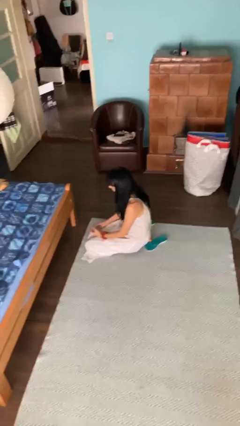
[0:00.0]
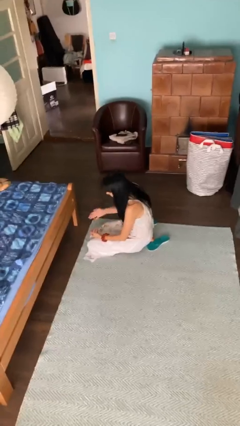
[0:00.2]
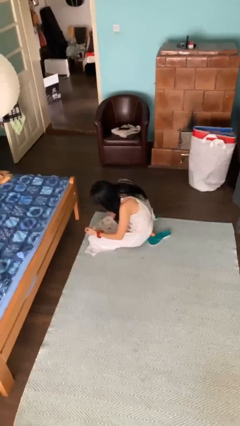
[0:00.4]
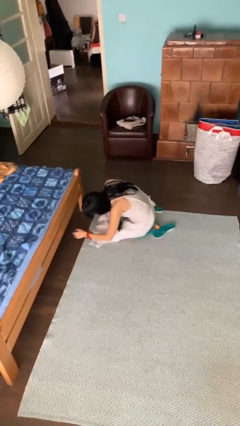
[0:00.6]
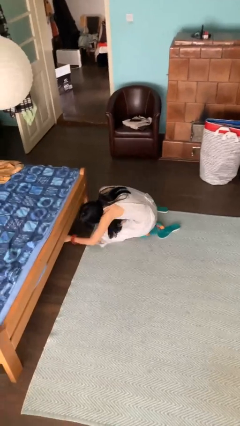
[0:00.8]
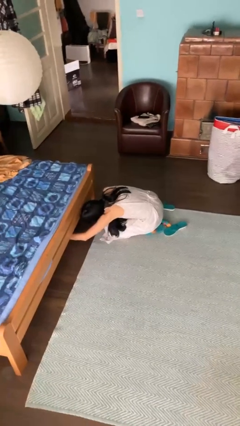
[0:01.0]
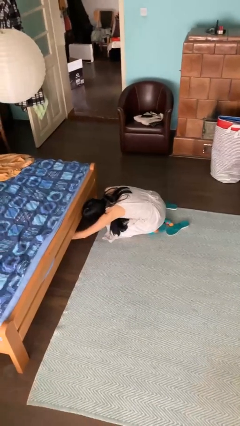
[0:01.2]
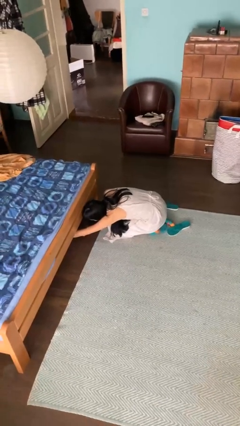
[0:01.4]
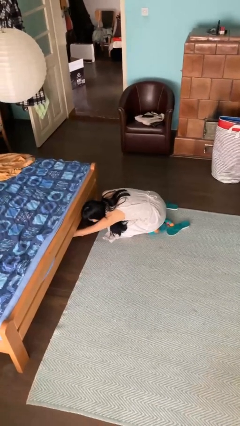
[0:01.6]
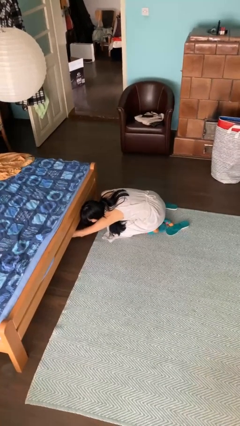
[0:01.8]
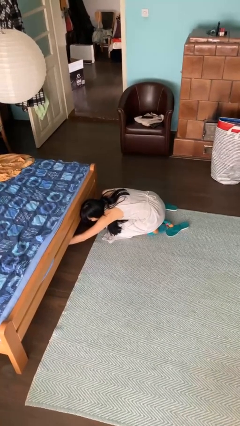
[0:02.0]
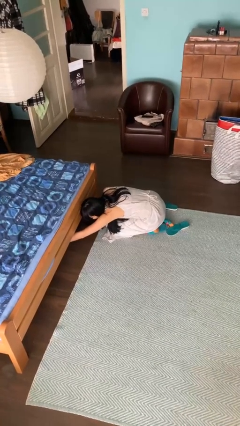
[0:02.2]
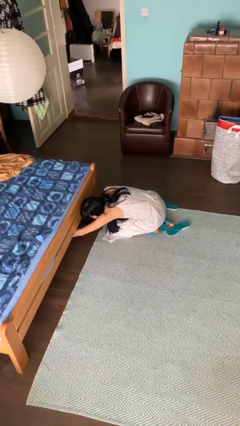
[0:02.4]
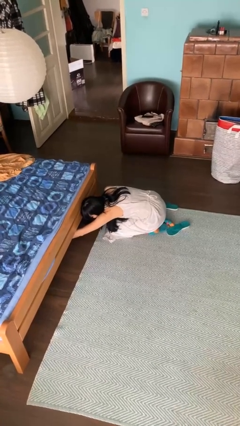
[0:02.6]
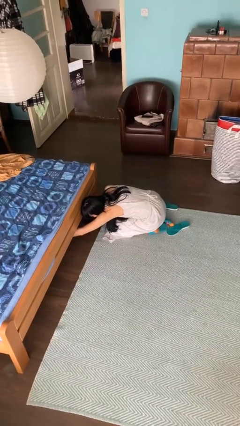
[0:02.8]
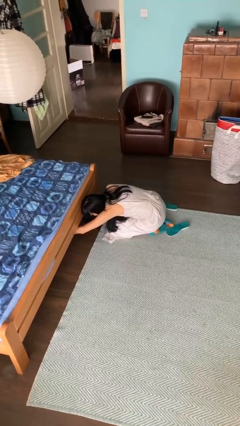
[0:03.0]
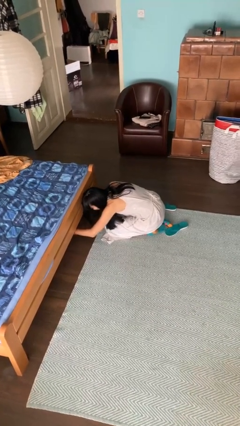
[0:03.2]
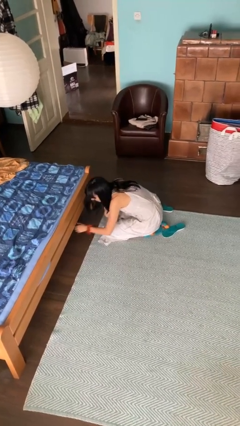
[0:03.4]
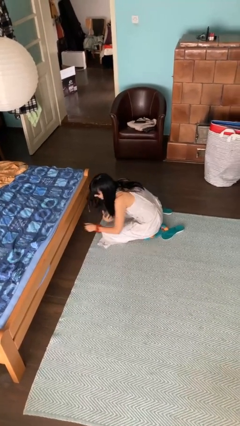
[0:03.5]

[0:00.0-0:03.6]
person searches under bed

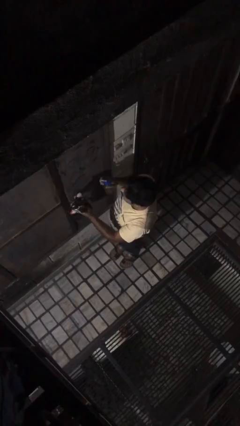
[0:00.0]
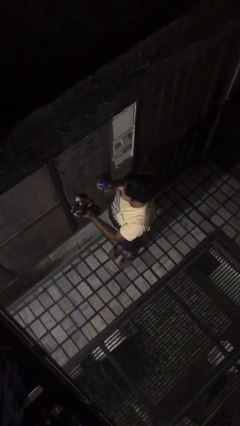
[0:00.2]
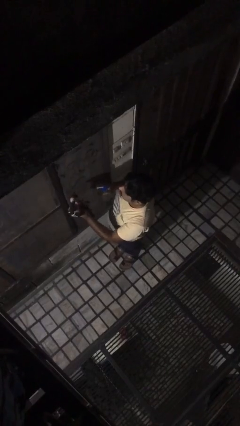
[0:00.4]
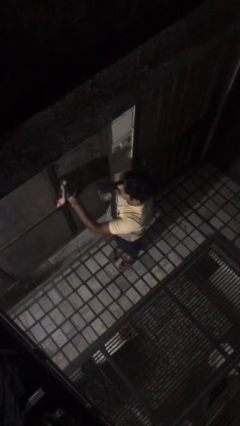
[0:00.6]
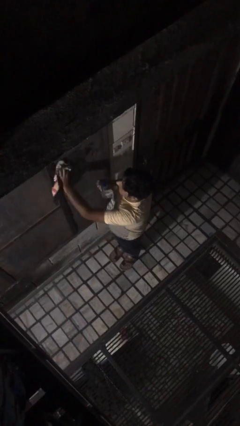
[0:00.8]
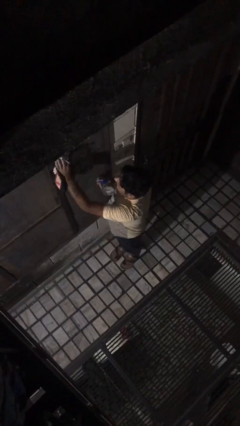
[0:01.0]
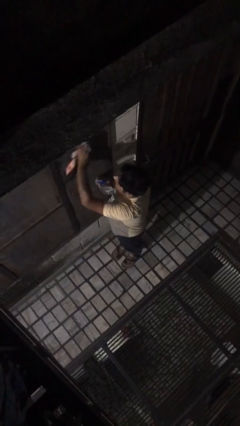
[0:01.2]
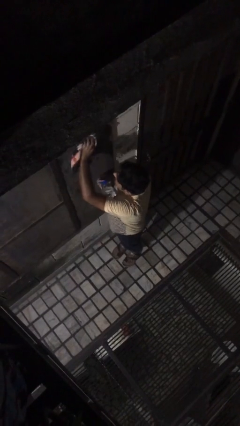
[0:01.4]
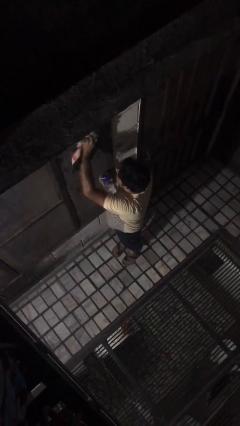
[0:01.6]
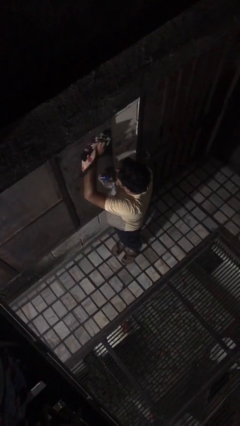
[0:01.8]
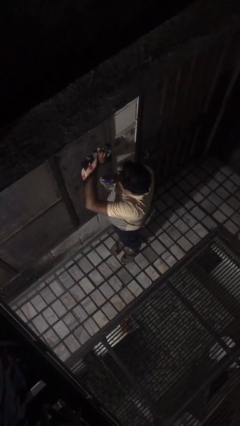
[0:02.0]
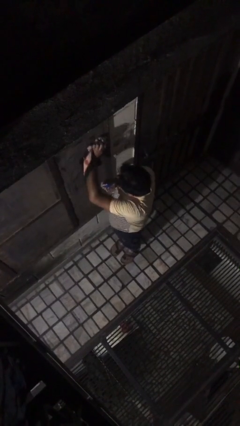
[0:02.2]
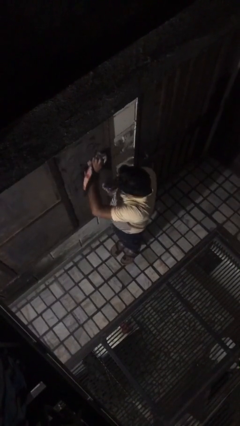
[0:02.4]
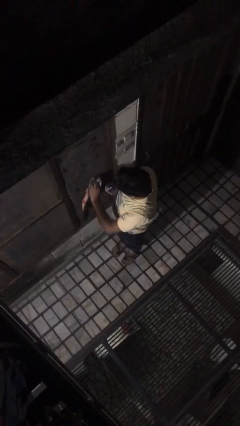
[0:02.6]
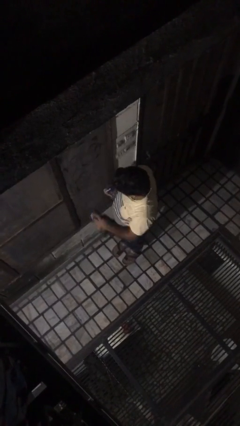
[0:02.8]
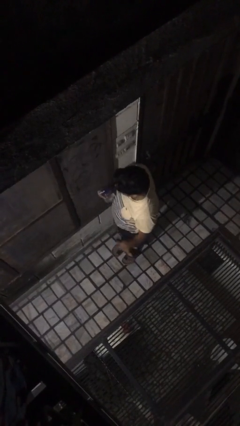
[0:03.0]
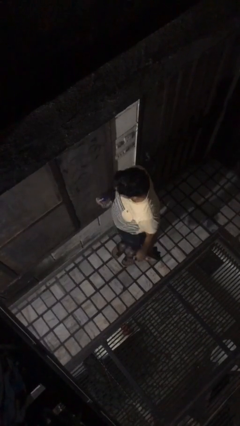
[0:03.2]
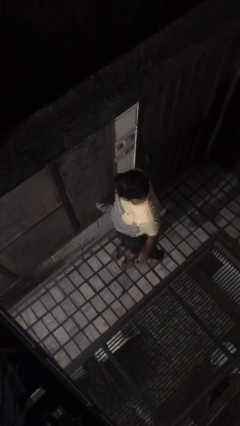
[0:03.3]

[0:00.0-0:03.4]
person washes window

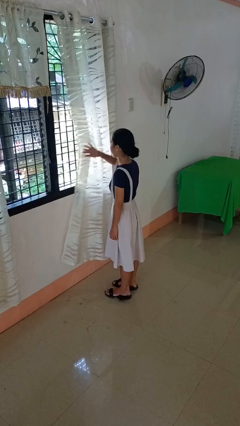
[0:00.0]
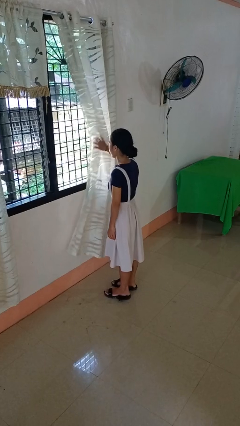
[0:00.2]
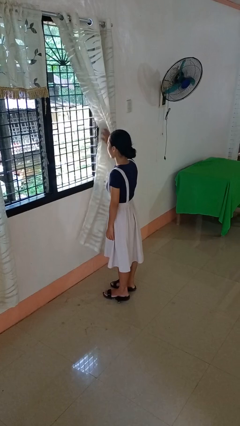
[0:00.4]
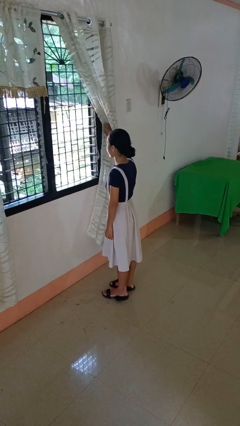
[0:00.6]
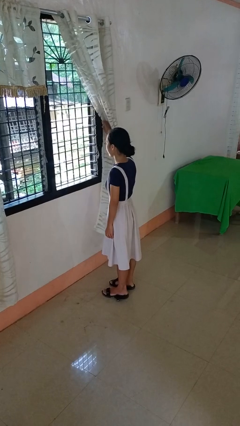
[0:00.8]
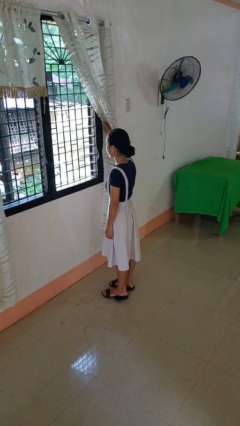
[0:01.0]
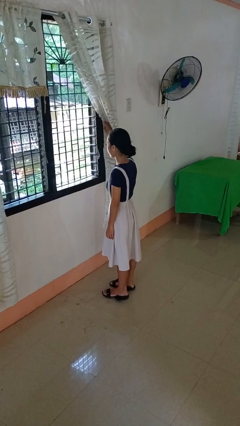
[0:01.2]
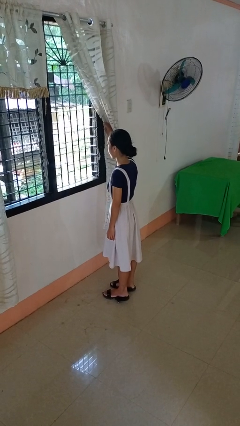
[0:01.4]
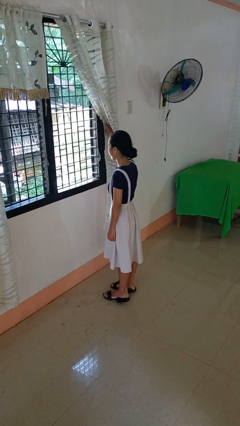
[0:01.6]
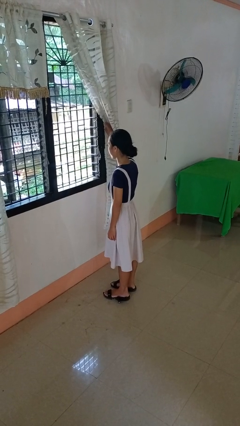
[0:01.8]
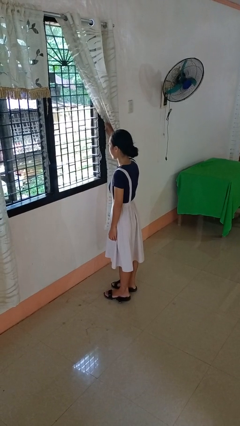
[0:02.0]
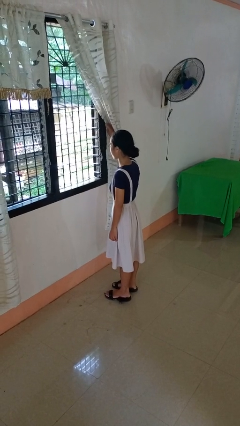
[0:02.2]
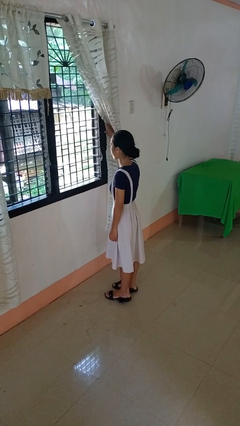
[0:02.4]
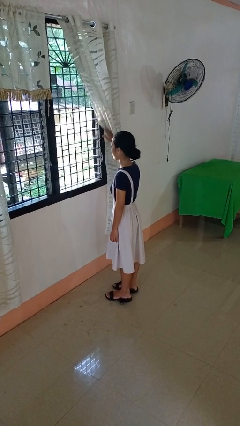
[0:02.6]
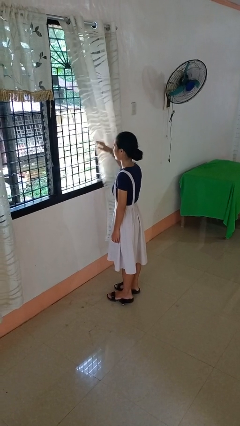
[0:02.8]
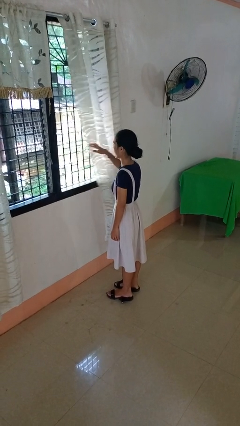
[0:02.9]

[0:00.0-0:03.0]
person opens curtains

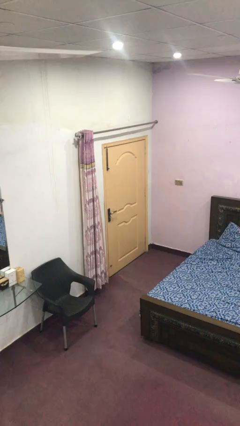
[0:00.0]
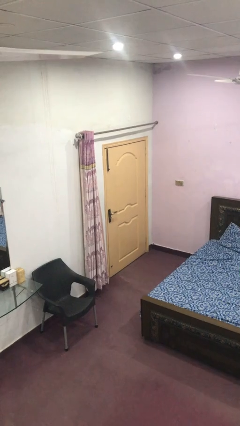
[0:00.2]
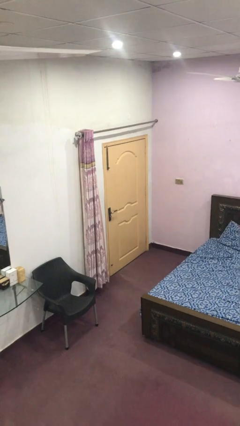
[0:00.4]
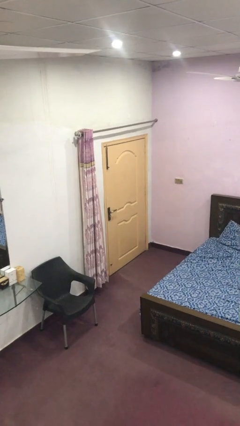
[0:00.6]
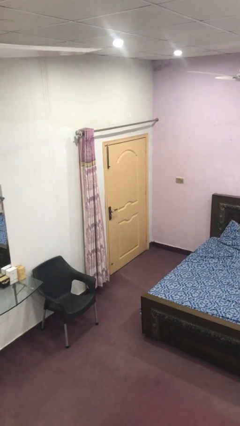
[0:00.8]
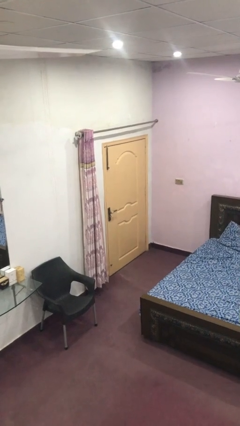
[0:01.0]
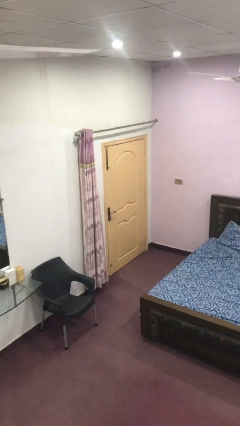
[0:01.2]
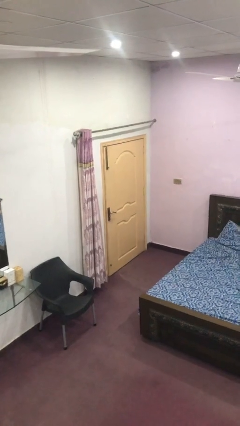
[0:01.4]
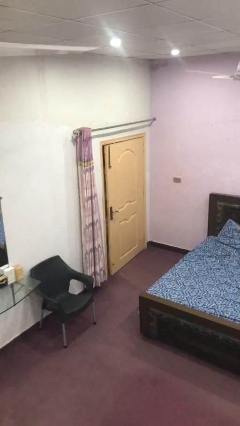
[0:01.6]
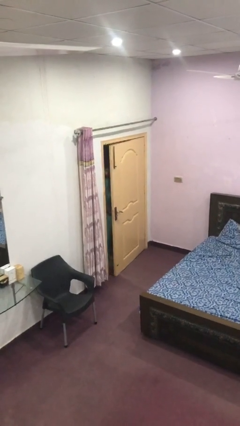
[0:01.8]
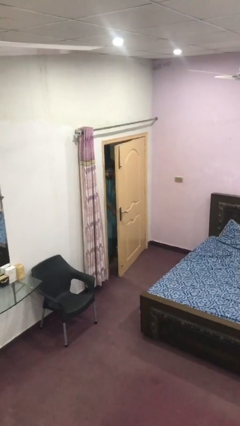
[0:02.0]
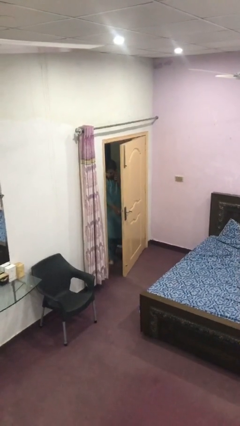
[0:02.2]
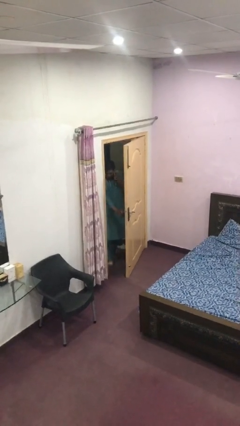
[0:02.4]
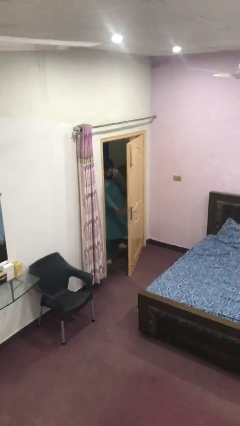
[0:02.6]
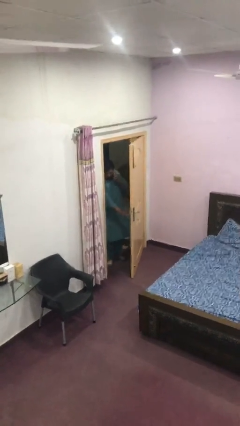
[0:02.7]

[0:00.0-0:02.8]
person opens facility door

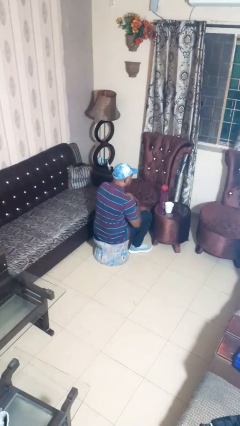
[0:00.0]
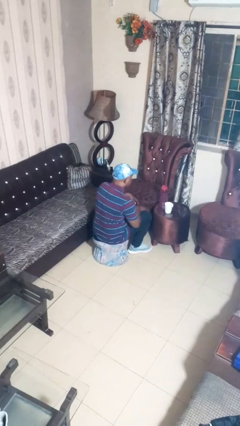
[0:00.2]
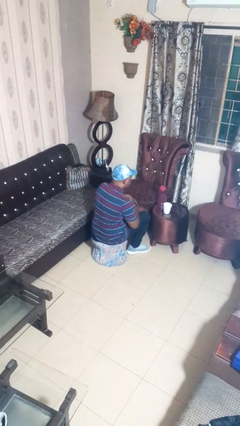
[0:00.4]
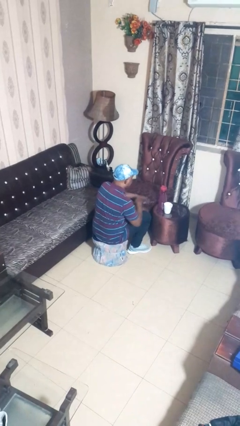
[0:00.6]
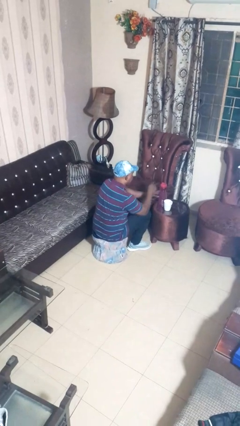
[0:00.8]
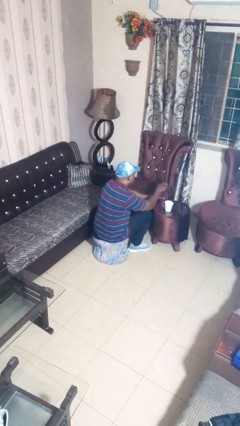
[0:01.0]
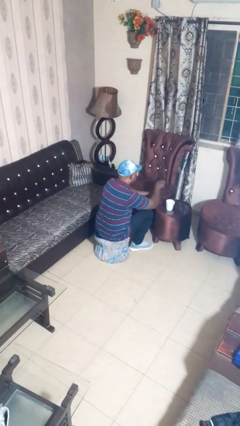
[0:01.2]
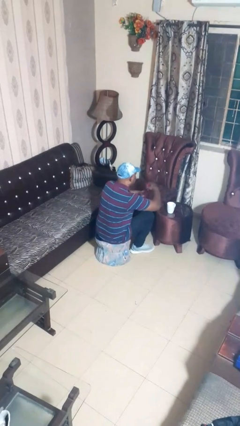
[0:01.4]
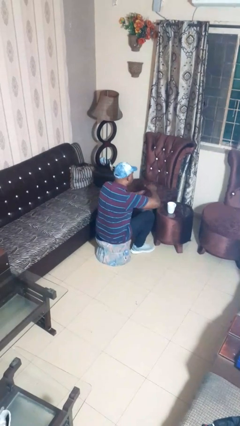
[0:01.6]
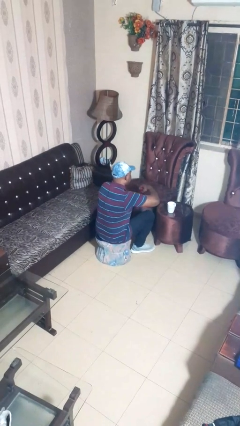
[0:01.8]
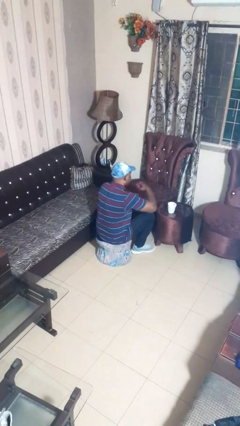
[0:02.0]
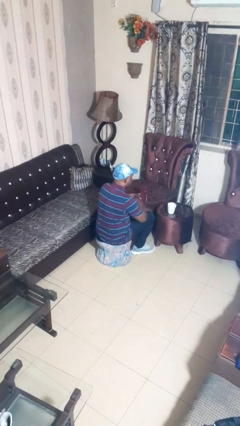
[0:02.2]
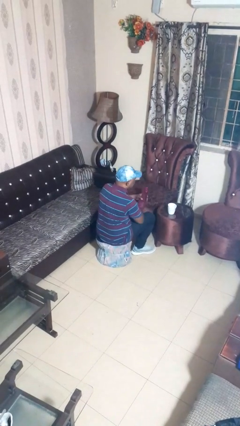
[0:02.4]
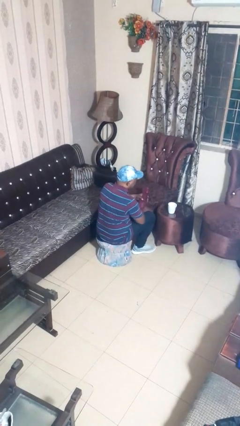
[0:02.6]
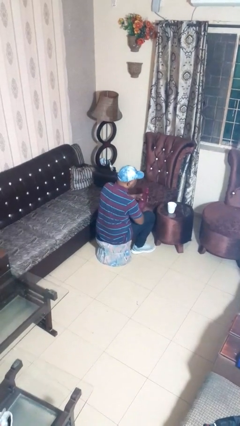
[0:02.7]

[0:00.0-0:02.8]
person unscrews lid from bottle

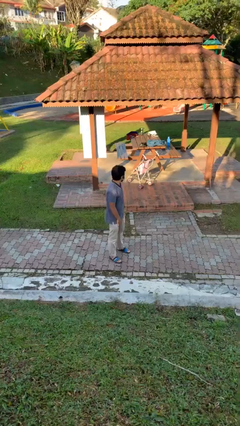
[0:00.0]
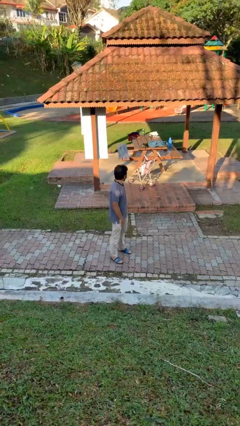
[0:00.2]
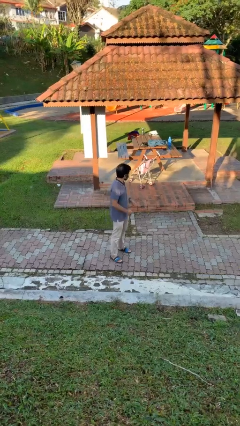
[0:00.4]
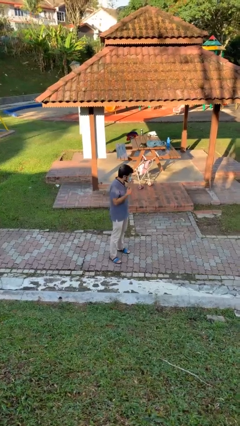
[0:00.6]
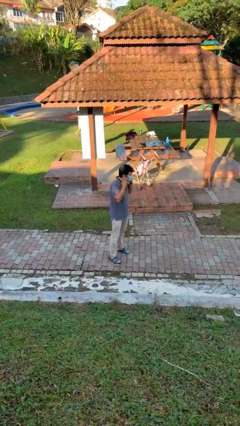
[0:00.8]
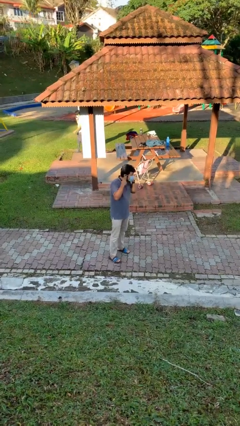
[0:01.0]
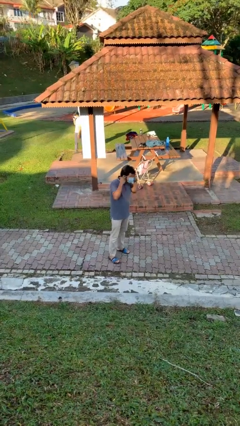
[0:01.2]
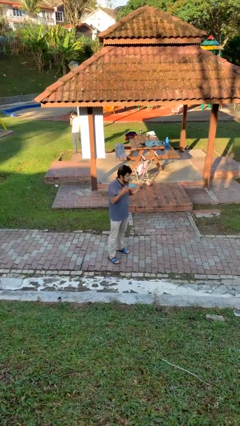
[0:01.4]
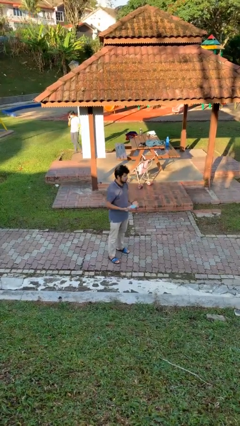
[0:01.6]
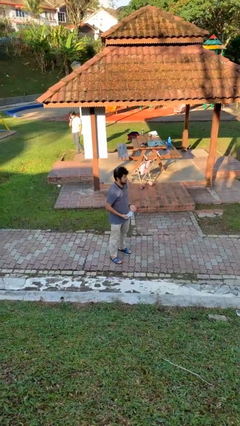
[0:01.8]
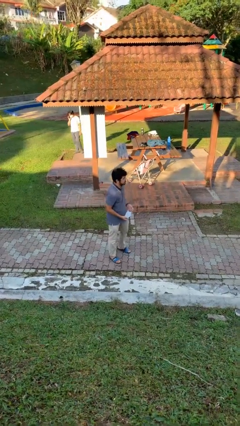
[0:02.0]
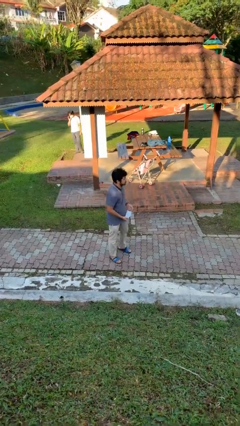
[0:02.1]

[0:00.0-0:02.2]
person takes off facemask
